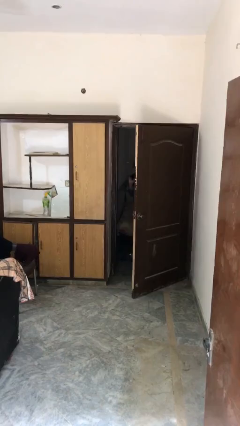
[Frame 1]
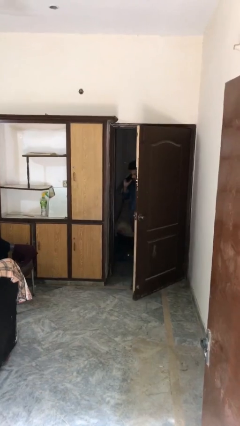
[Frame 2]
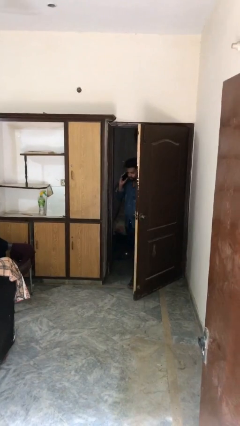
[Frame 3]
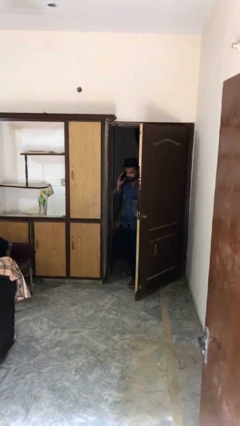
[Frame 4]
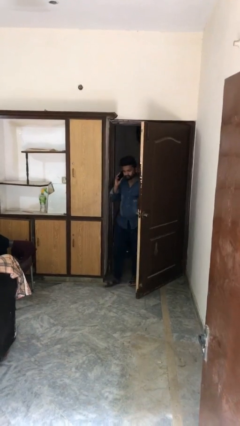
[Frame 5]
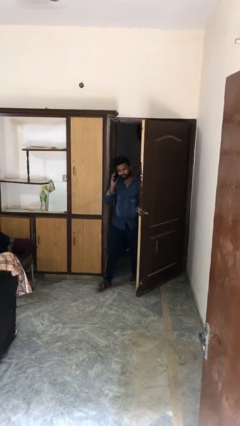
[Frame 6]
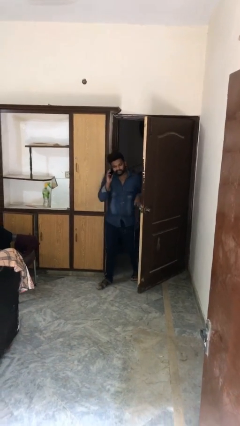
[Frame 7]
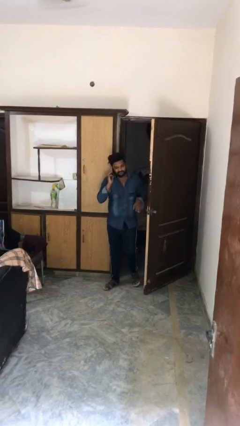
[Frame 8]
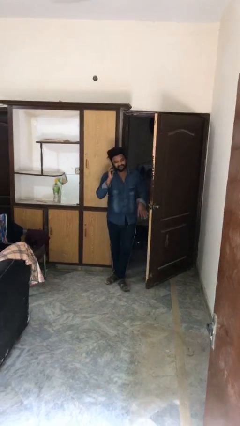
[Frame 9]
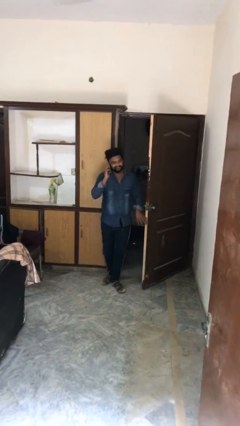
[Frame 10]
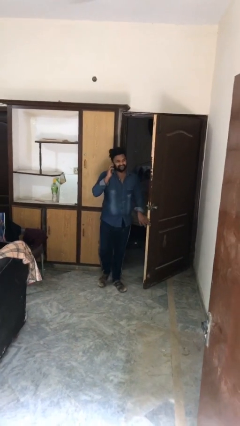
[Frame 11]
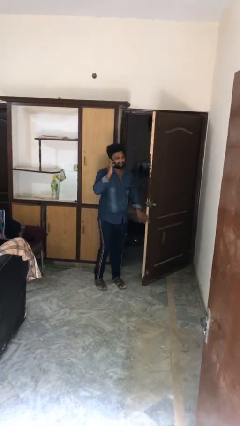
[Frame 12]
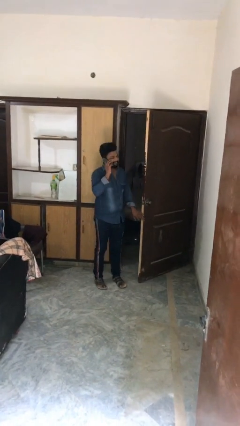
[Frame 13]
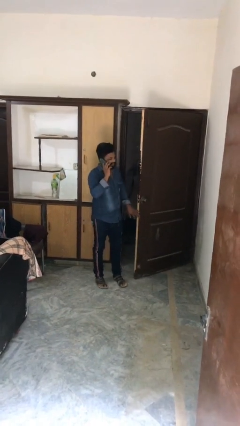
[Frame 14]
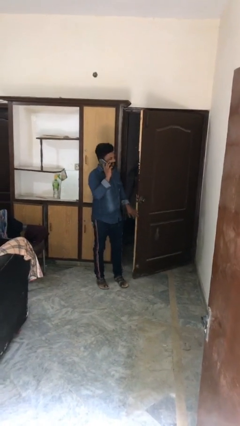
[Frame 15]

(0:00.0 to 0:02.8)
person enters scene through structure

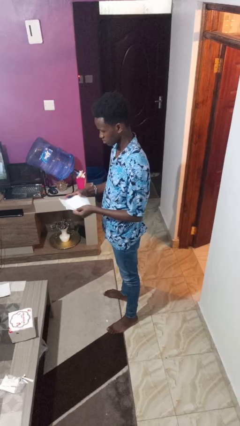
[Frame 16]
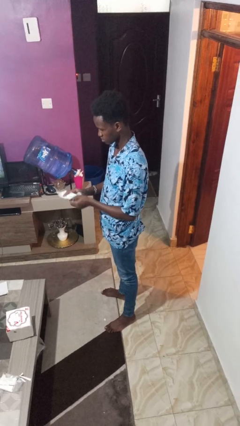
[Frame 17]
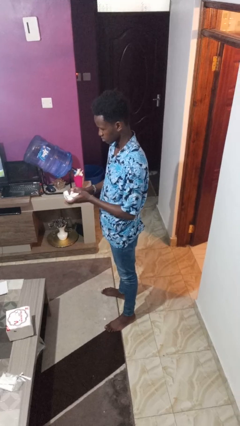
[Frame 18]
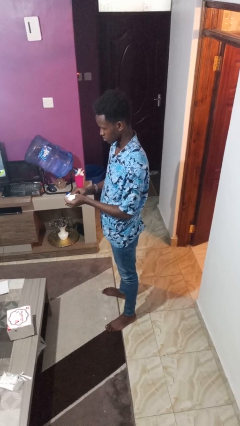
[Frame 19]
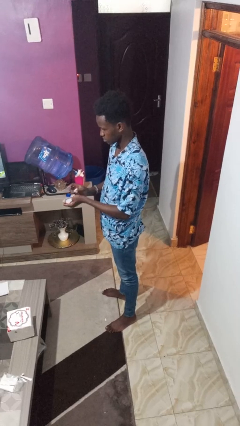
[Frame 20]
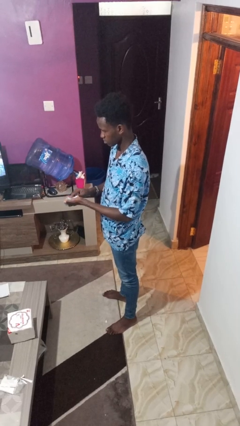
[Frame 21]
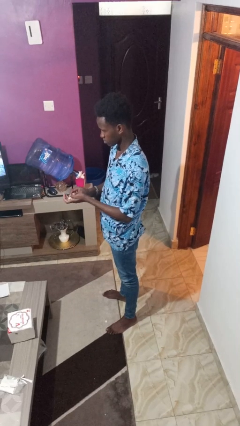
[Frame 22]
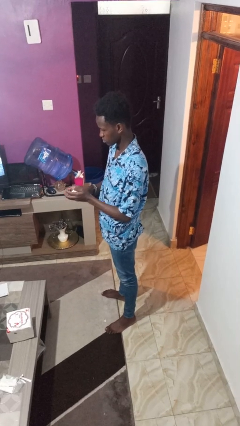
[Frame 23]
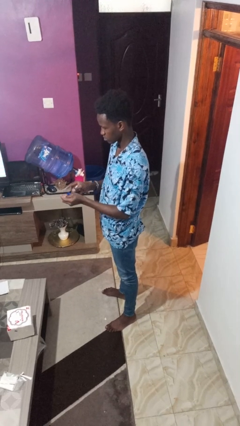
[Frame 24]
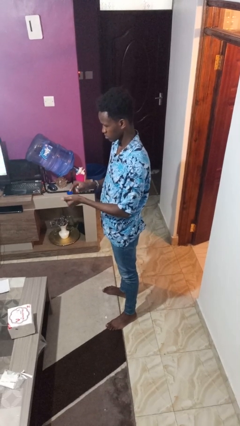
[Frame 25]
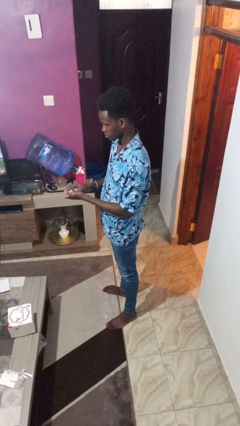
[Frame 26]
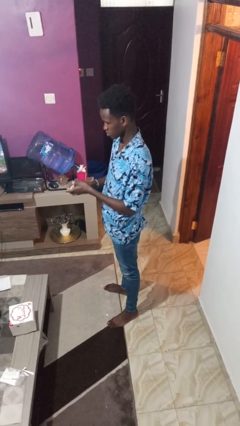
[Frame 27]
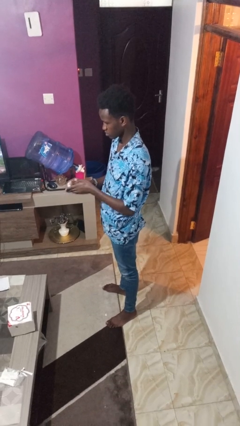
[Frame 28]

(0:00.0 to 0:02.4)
person crumples paper

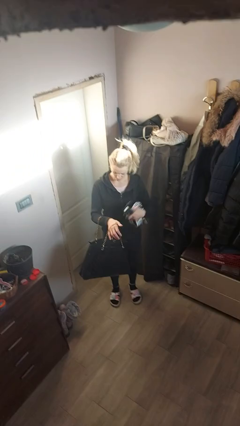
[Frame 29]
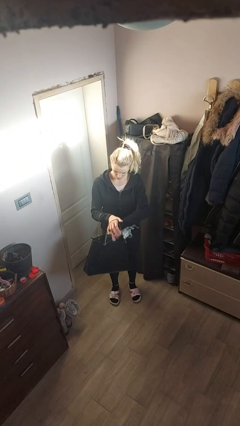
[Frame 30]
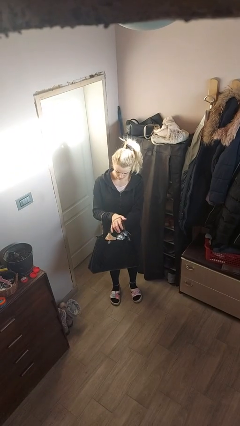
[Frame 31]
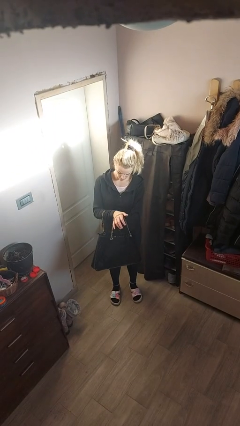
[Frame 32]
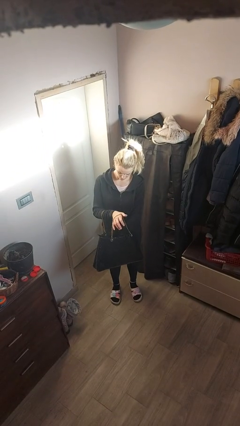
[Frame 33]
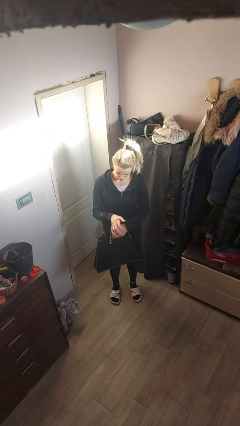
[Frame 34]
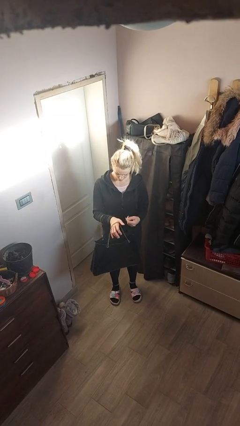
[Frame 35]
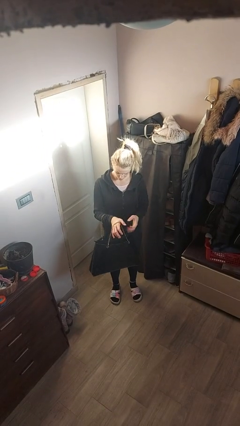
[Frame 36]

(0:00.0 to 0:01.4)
person puts object into purse

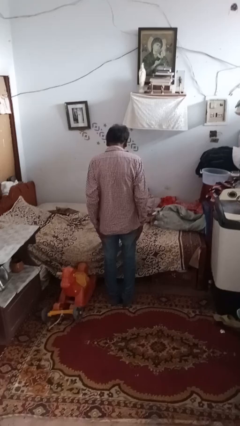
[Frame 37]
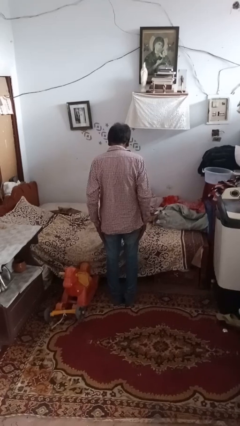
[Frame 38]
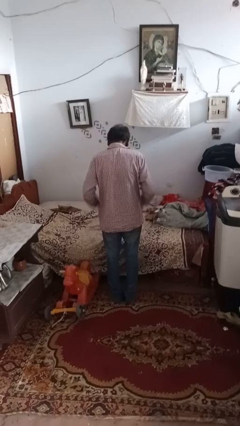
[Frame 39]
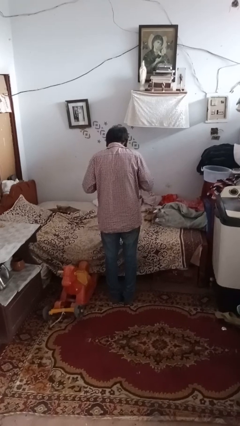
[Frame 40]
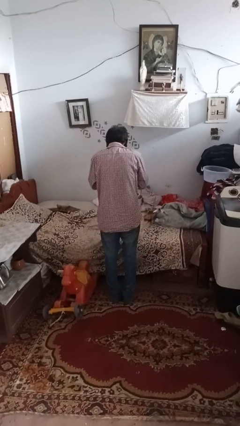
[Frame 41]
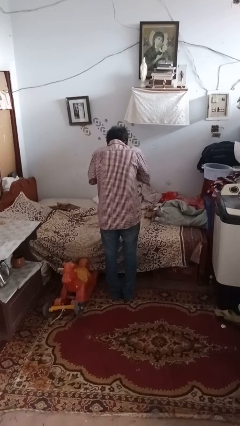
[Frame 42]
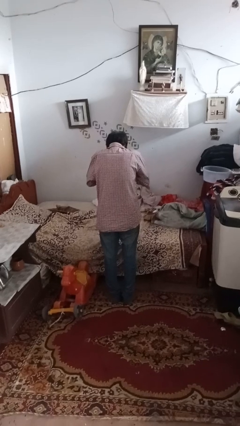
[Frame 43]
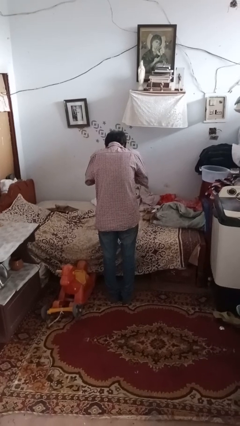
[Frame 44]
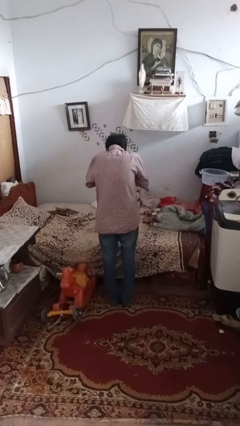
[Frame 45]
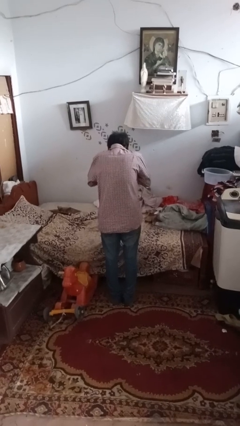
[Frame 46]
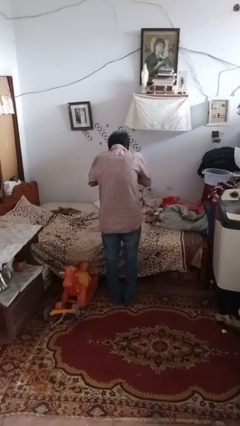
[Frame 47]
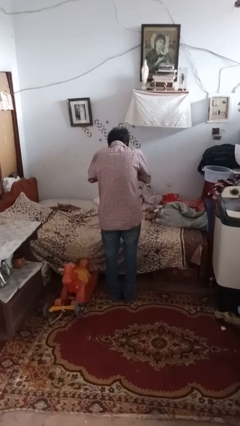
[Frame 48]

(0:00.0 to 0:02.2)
person sneezes into hand

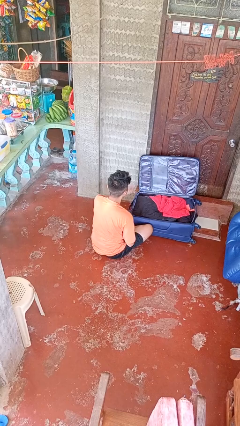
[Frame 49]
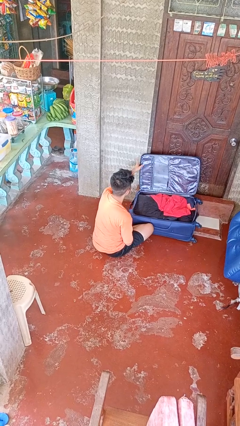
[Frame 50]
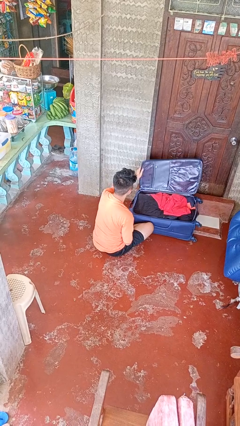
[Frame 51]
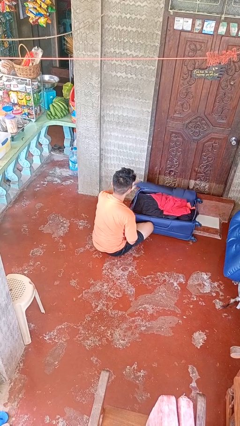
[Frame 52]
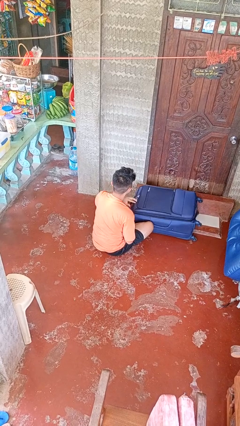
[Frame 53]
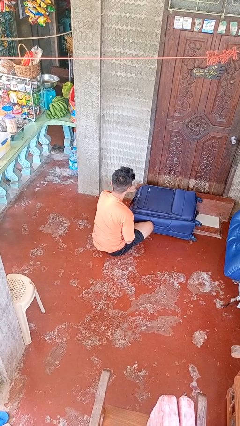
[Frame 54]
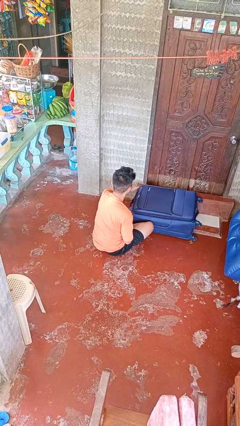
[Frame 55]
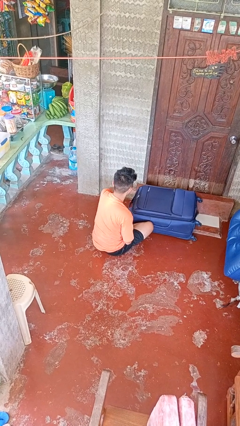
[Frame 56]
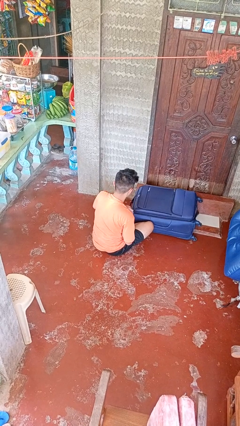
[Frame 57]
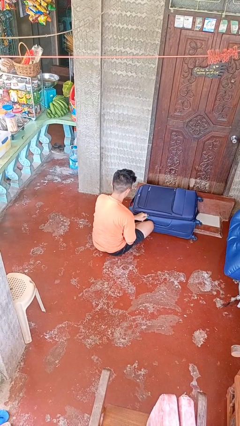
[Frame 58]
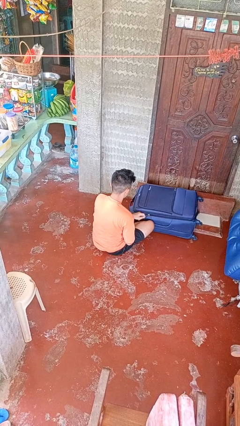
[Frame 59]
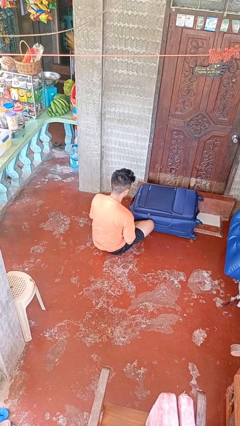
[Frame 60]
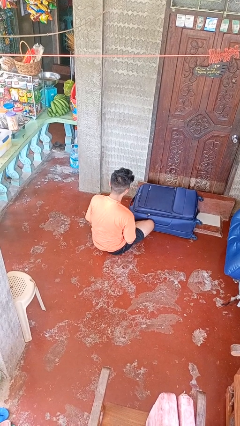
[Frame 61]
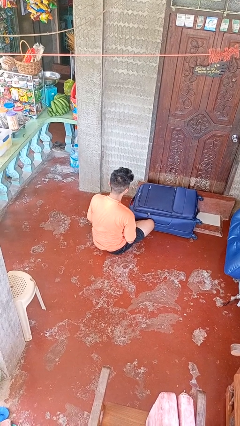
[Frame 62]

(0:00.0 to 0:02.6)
person closes suitcase

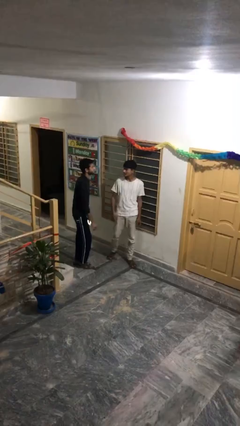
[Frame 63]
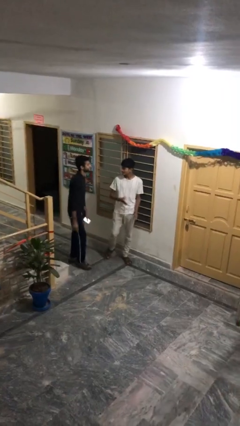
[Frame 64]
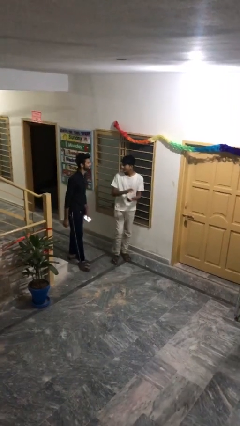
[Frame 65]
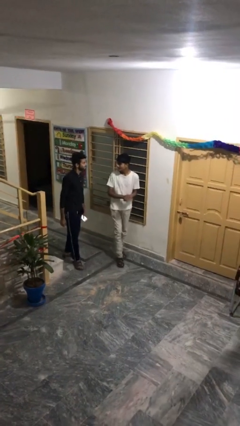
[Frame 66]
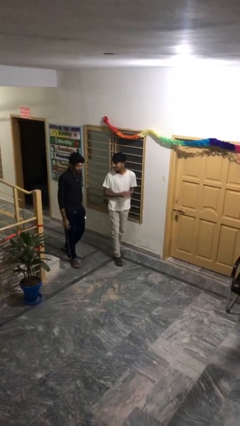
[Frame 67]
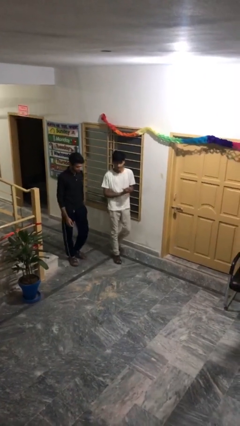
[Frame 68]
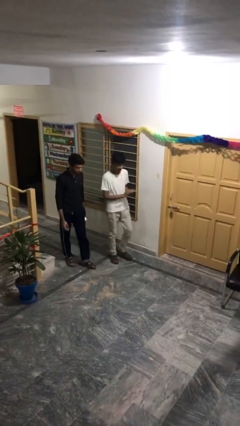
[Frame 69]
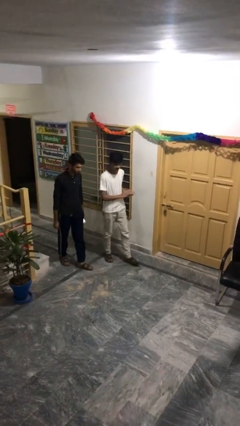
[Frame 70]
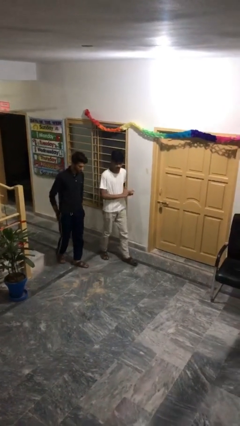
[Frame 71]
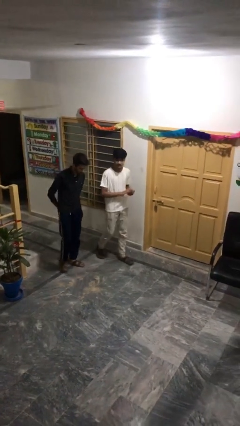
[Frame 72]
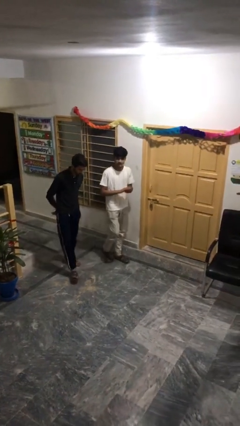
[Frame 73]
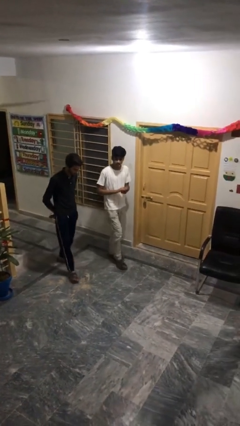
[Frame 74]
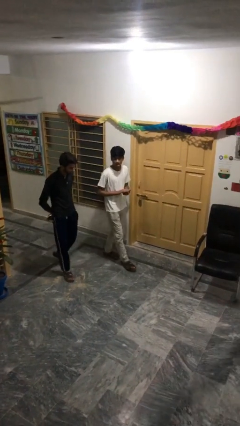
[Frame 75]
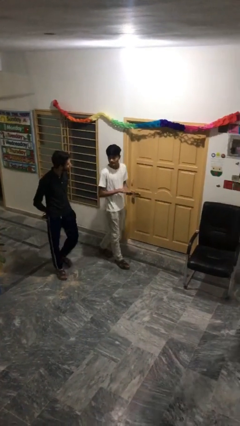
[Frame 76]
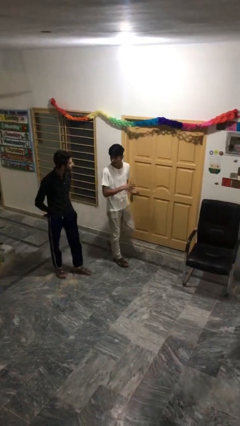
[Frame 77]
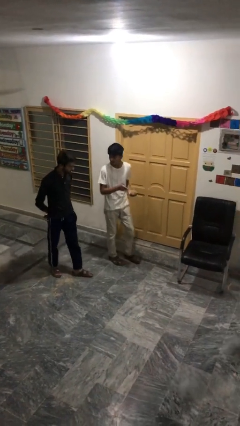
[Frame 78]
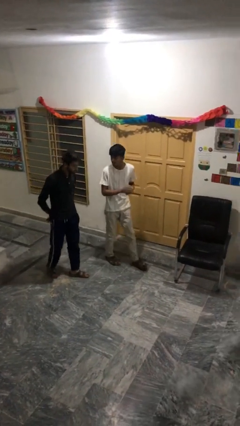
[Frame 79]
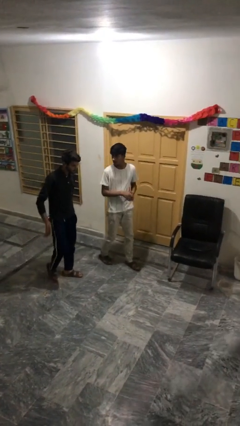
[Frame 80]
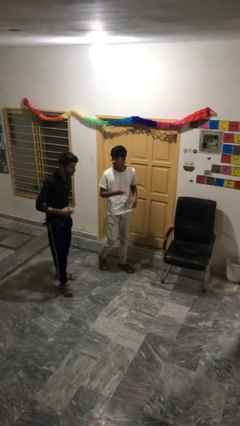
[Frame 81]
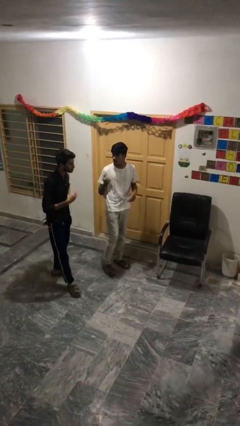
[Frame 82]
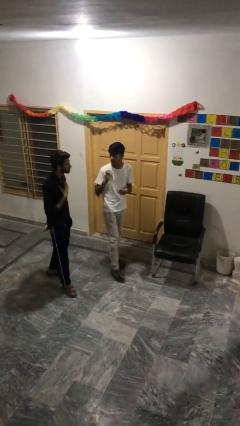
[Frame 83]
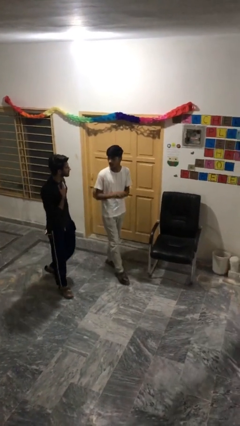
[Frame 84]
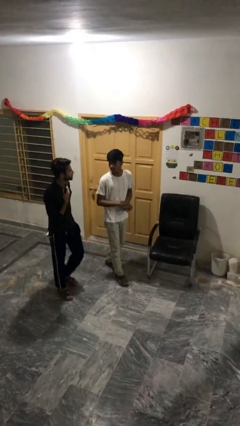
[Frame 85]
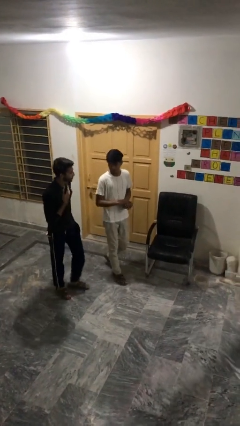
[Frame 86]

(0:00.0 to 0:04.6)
person talks to person

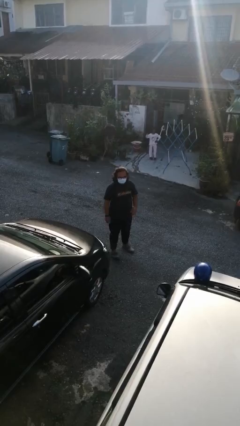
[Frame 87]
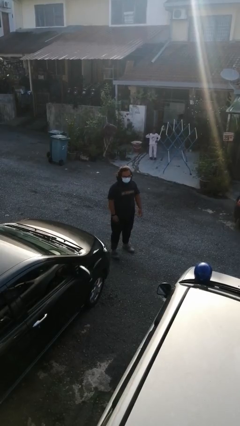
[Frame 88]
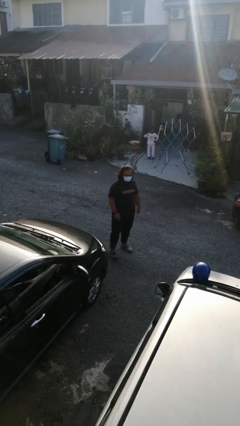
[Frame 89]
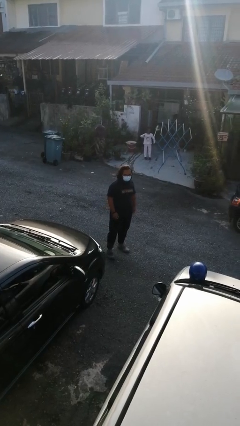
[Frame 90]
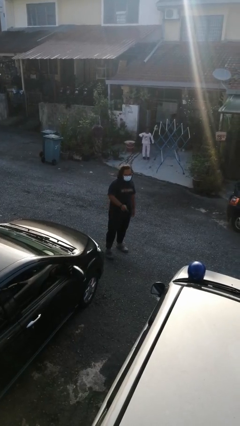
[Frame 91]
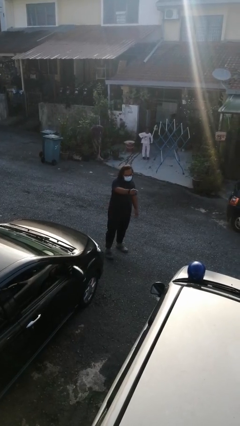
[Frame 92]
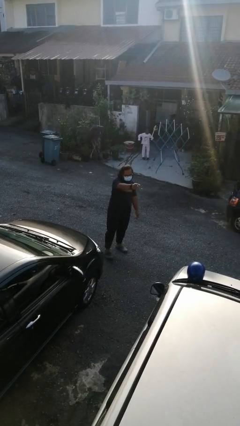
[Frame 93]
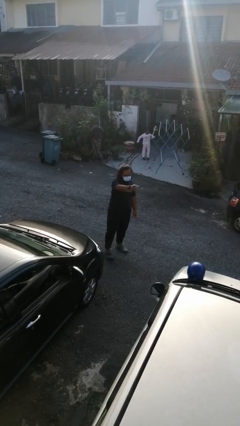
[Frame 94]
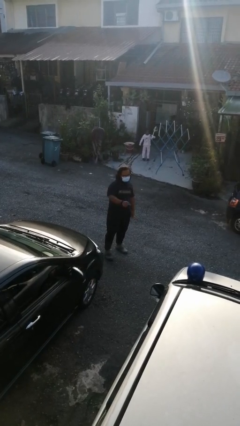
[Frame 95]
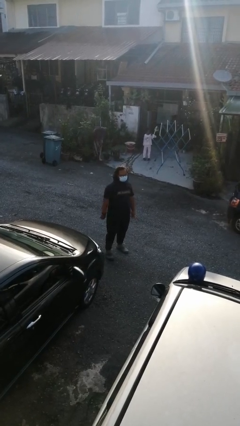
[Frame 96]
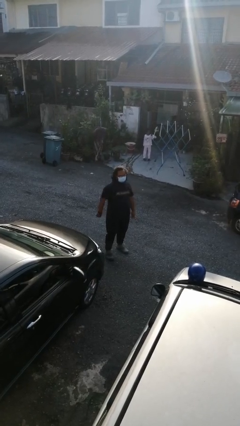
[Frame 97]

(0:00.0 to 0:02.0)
person points at person
